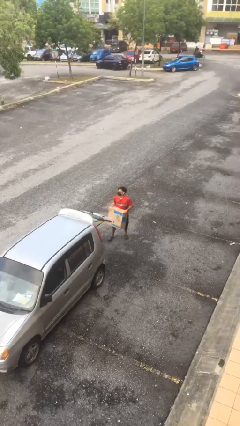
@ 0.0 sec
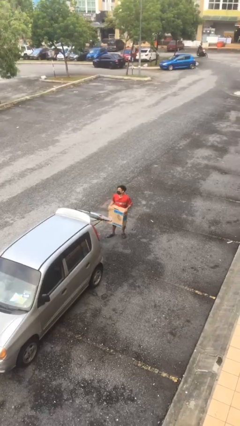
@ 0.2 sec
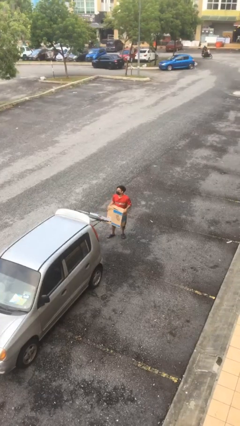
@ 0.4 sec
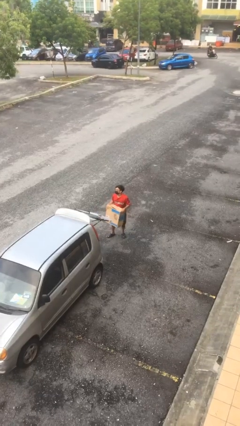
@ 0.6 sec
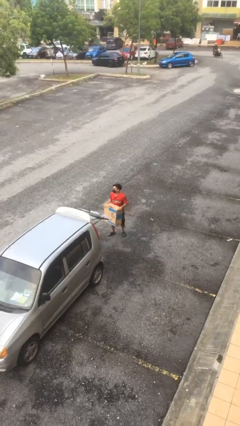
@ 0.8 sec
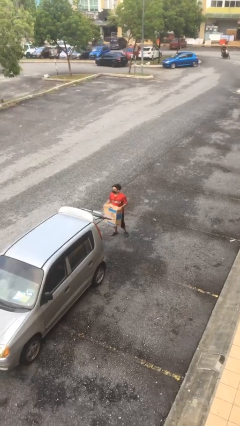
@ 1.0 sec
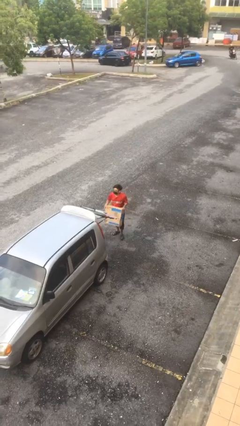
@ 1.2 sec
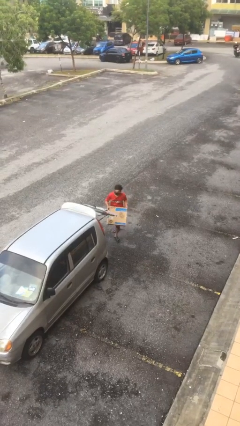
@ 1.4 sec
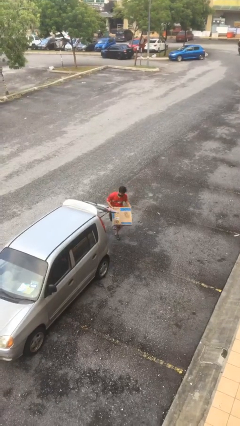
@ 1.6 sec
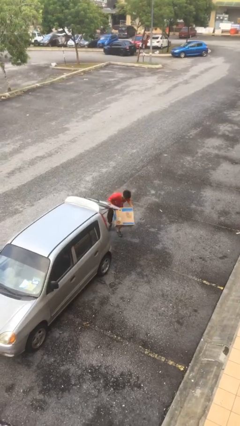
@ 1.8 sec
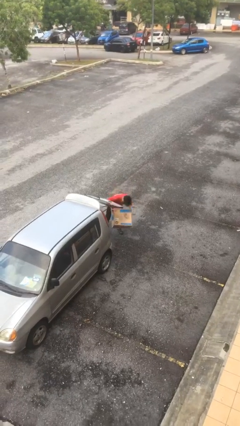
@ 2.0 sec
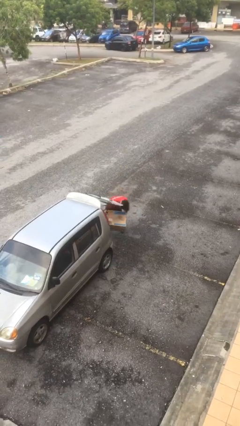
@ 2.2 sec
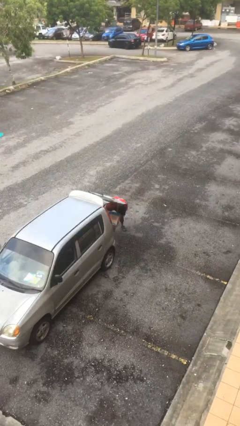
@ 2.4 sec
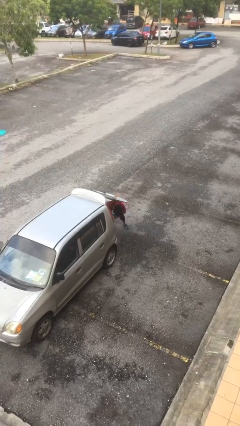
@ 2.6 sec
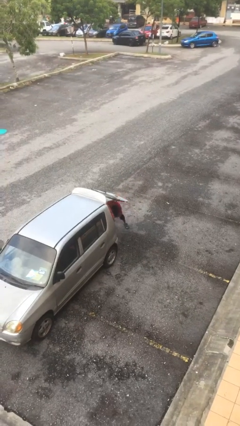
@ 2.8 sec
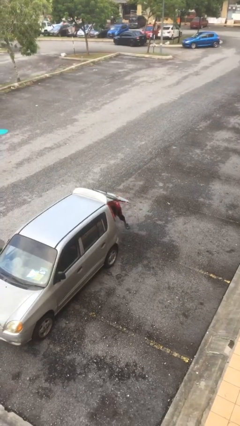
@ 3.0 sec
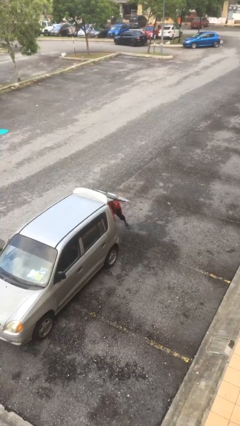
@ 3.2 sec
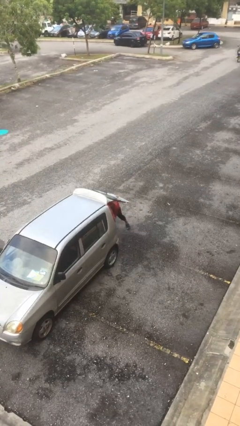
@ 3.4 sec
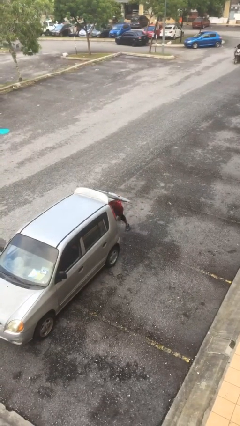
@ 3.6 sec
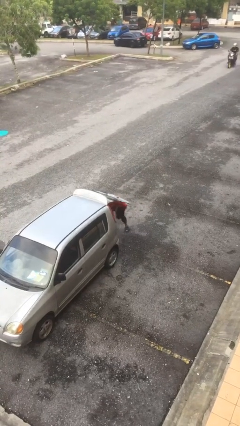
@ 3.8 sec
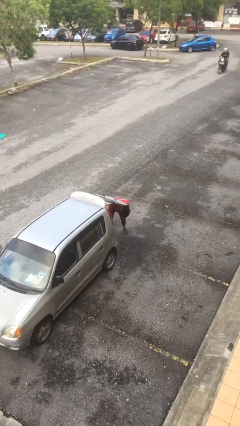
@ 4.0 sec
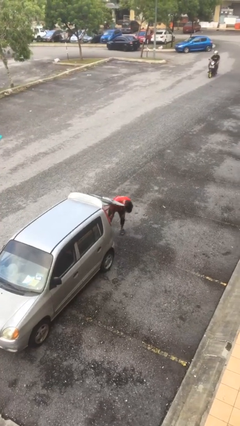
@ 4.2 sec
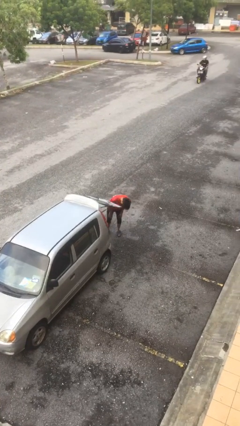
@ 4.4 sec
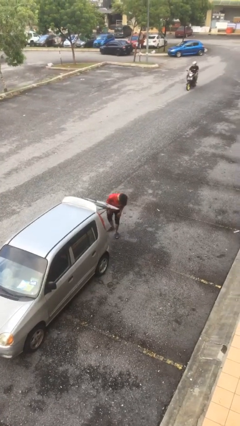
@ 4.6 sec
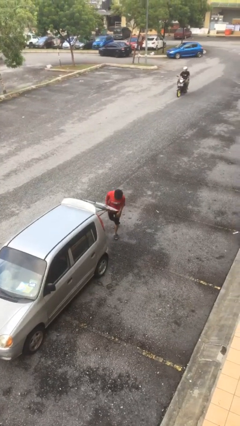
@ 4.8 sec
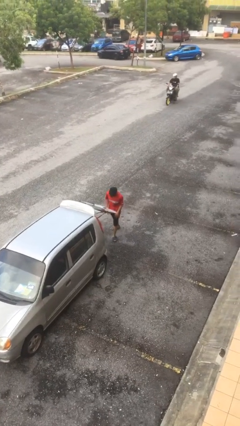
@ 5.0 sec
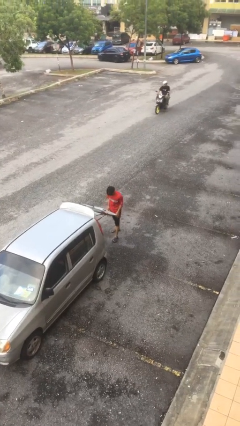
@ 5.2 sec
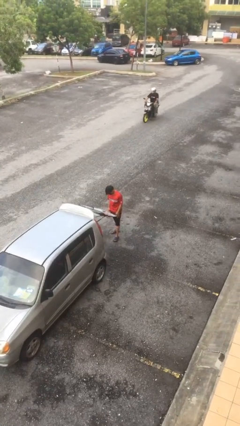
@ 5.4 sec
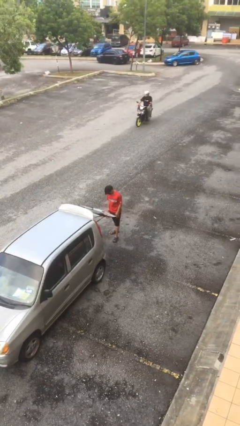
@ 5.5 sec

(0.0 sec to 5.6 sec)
person loads car

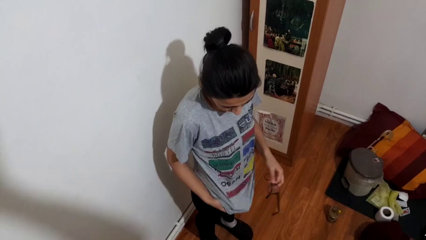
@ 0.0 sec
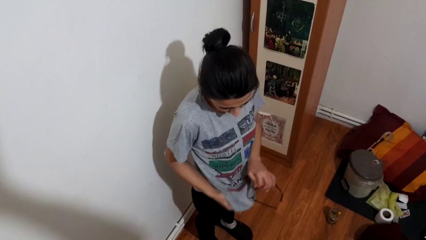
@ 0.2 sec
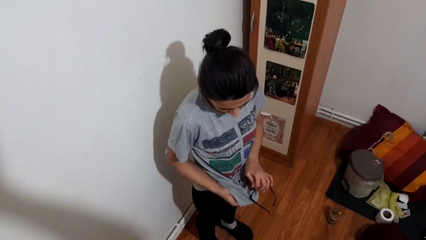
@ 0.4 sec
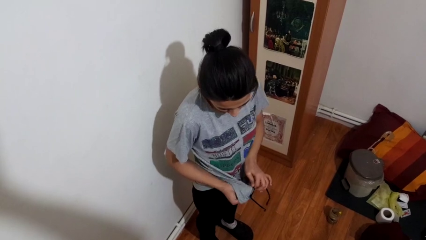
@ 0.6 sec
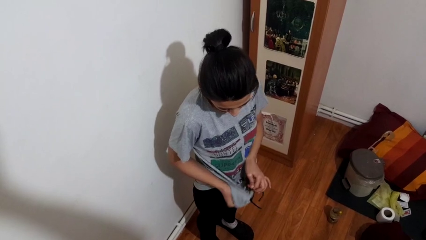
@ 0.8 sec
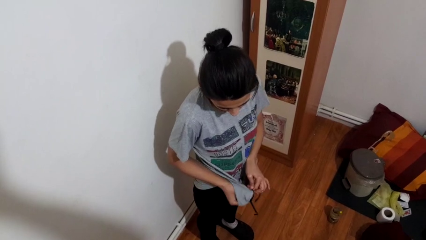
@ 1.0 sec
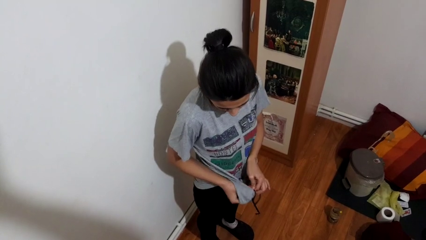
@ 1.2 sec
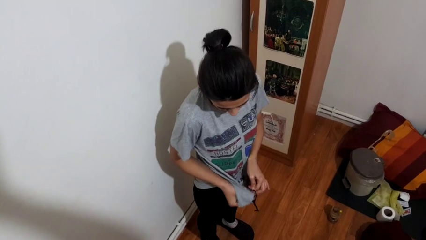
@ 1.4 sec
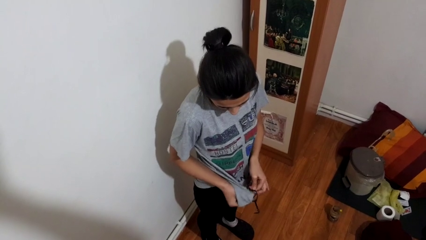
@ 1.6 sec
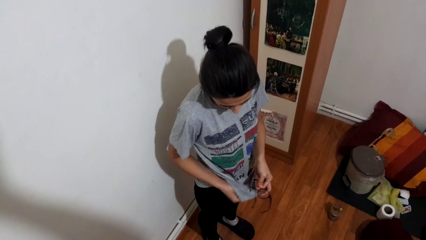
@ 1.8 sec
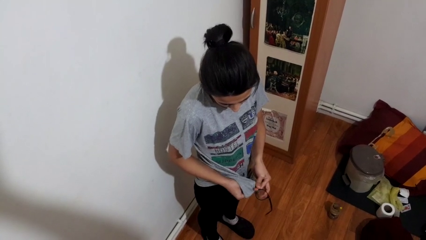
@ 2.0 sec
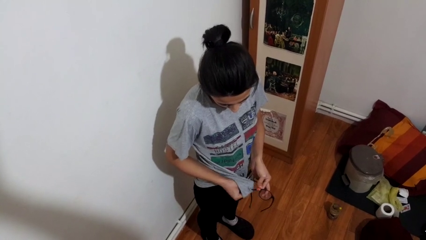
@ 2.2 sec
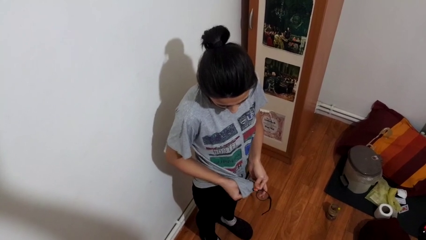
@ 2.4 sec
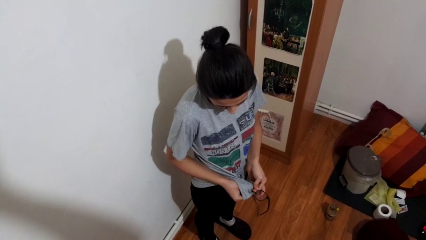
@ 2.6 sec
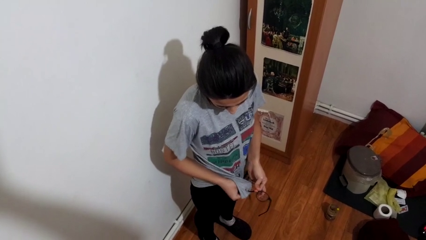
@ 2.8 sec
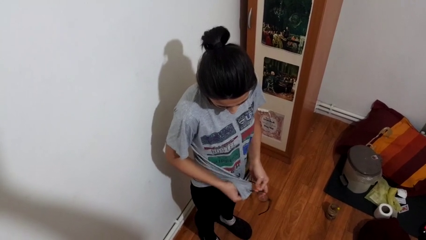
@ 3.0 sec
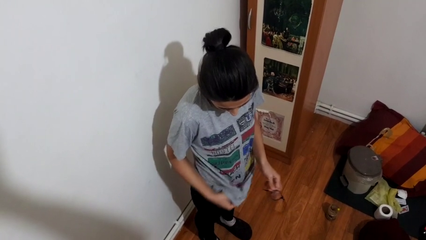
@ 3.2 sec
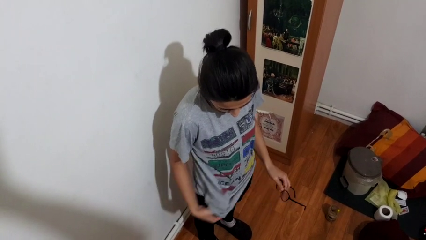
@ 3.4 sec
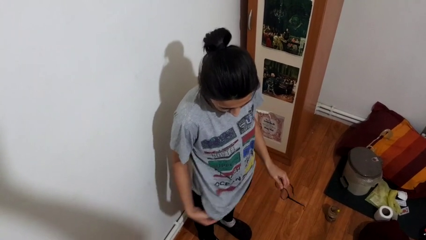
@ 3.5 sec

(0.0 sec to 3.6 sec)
person cleans eyeglasses

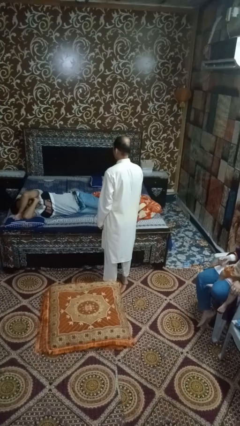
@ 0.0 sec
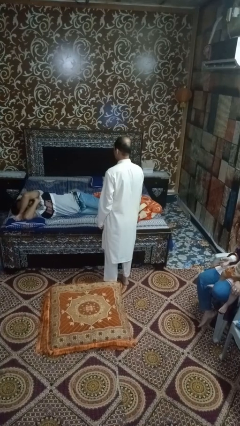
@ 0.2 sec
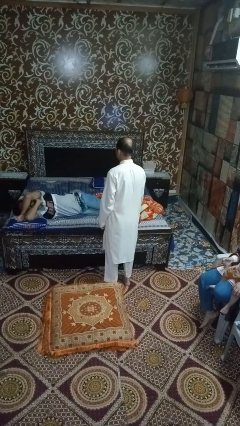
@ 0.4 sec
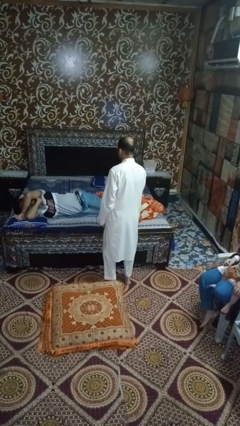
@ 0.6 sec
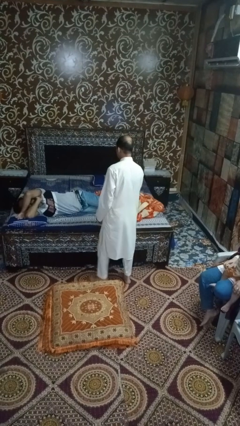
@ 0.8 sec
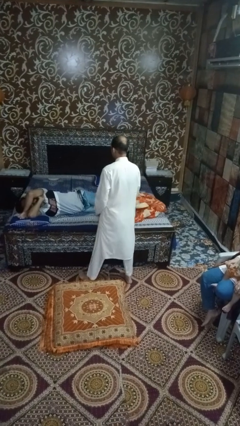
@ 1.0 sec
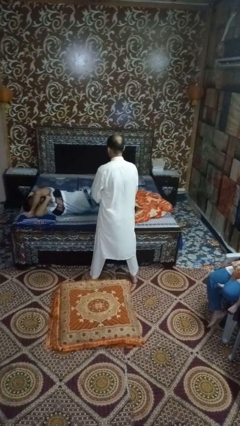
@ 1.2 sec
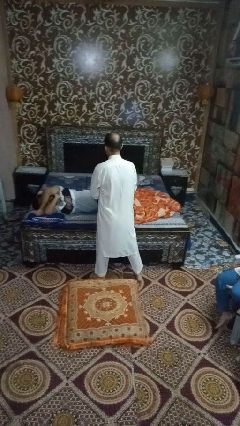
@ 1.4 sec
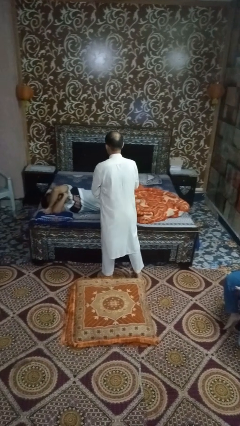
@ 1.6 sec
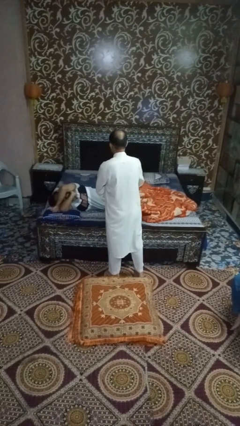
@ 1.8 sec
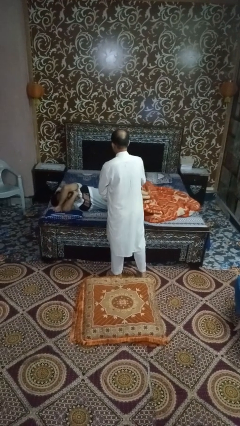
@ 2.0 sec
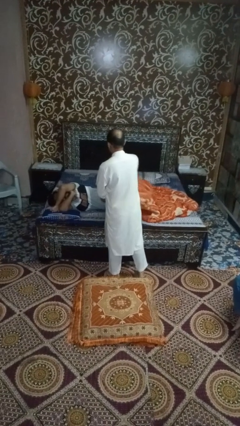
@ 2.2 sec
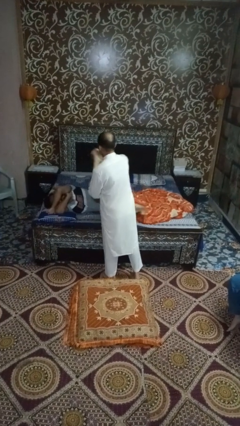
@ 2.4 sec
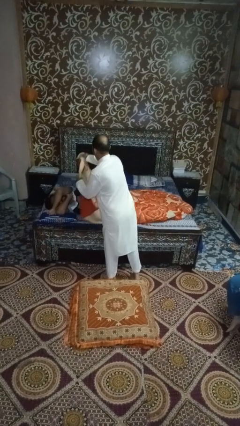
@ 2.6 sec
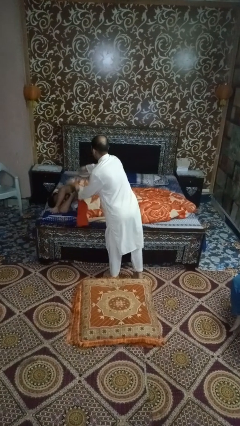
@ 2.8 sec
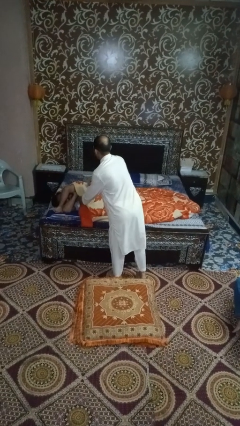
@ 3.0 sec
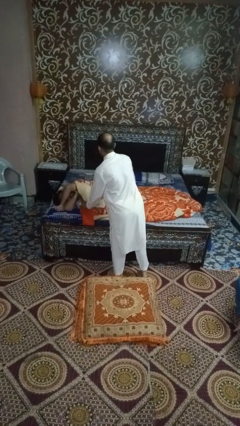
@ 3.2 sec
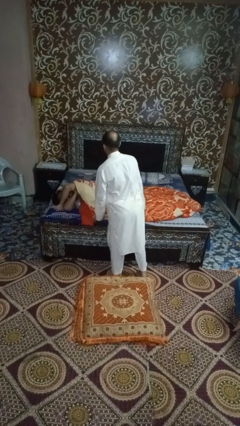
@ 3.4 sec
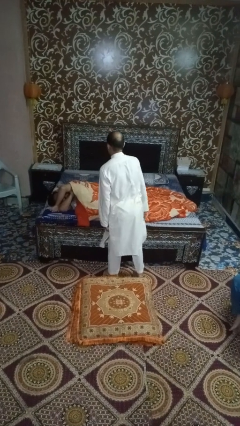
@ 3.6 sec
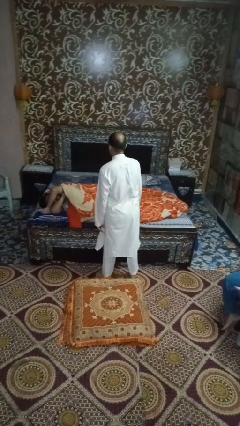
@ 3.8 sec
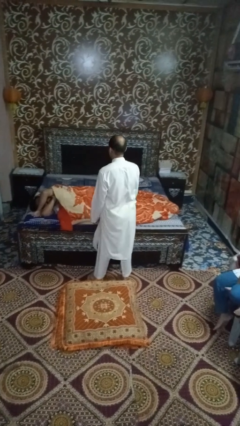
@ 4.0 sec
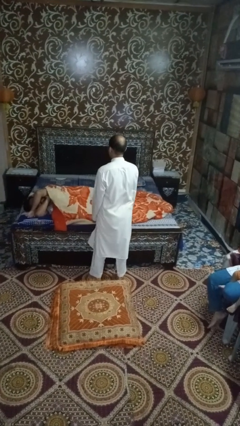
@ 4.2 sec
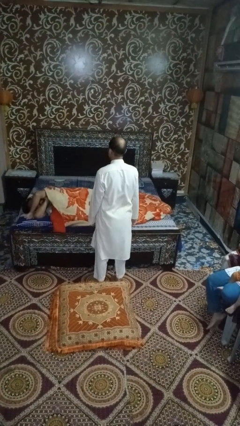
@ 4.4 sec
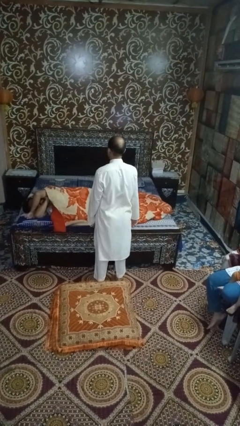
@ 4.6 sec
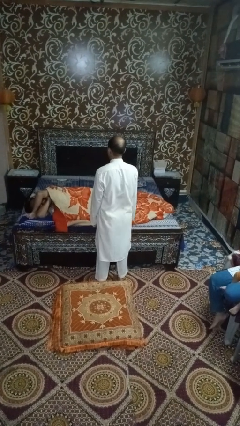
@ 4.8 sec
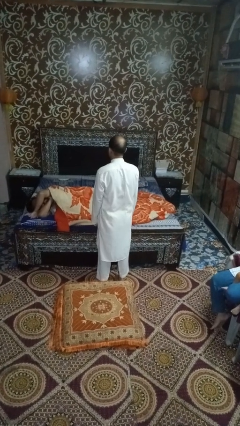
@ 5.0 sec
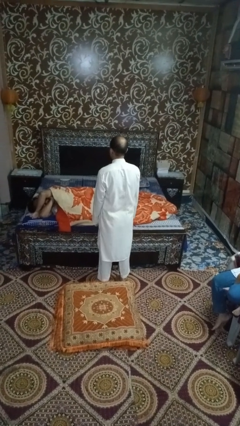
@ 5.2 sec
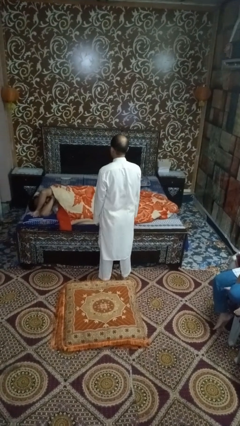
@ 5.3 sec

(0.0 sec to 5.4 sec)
person covers friend with blanket

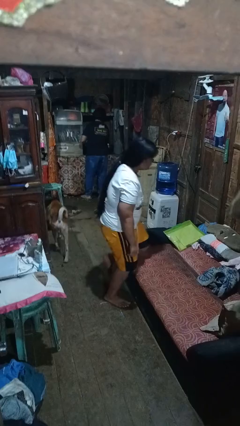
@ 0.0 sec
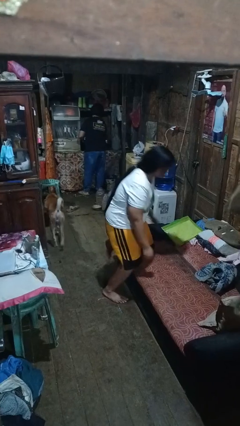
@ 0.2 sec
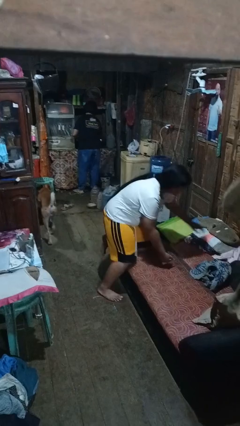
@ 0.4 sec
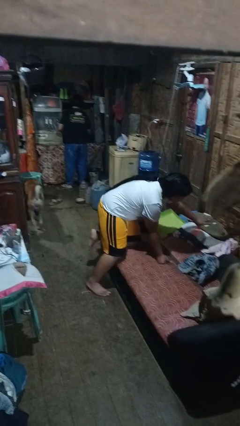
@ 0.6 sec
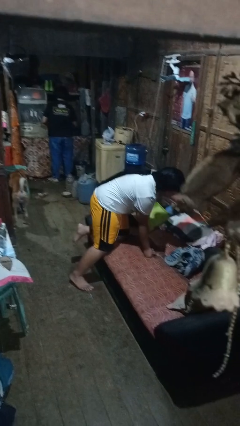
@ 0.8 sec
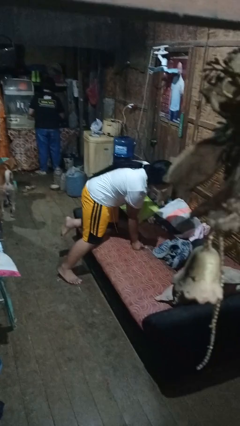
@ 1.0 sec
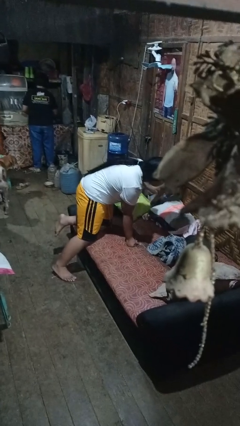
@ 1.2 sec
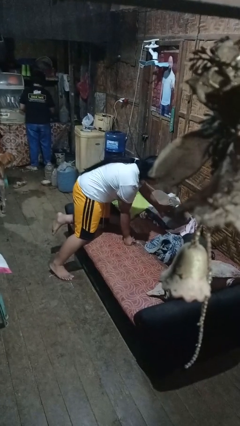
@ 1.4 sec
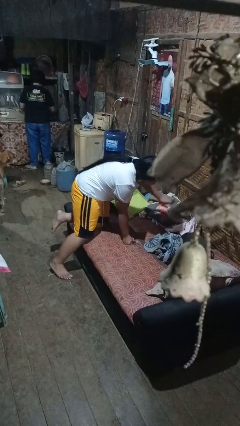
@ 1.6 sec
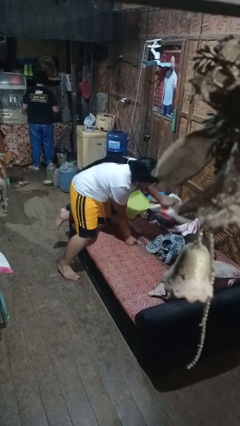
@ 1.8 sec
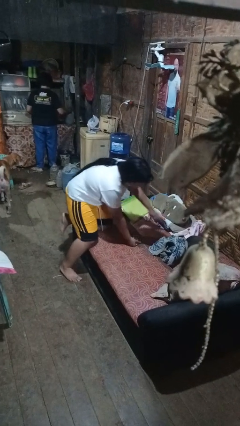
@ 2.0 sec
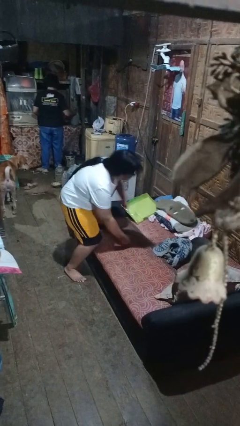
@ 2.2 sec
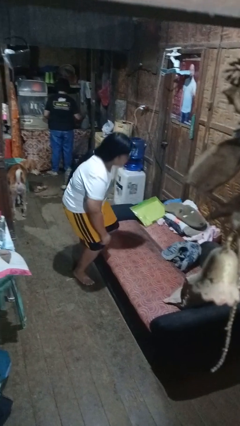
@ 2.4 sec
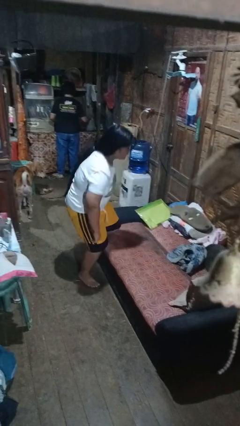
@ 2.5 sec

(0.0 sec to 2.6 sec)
person searches in couch

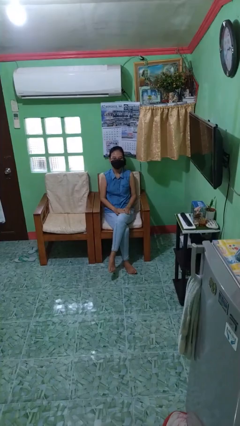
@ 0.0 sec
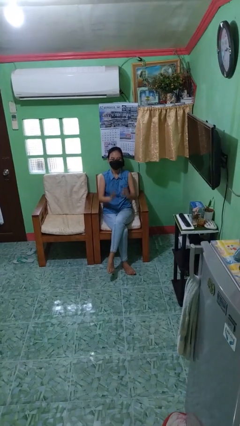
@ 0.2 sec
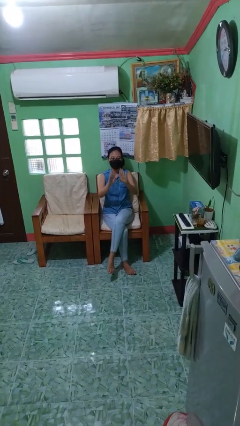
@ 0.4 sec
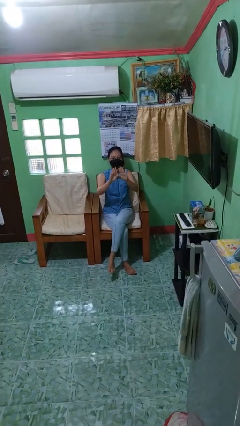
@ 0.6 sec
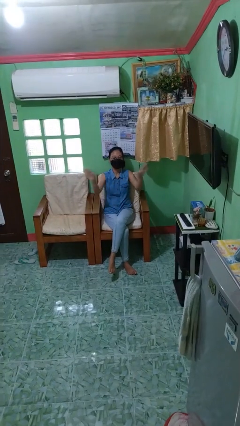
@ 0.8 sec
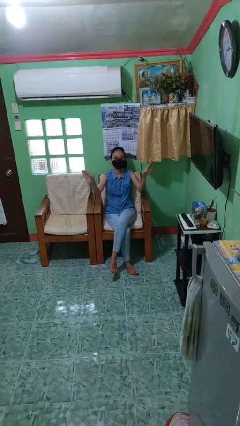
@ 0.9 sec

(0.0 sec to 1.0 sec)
person gestures zoom in
